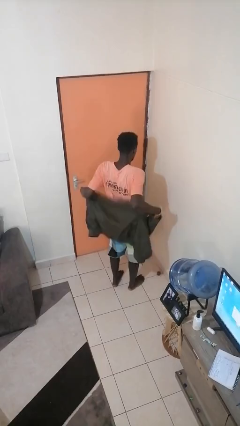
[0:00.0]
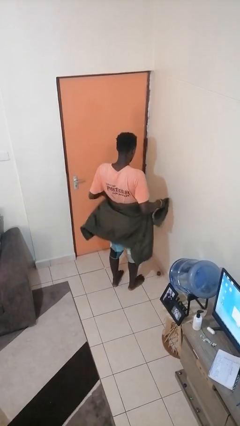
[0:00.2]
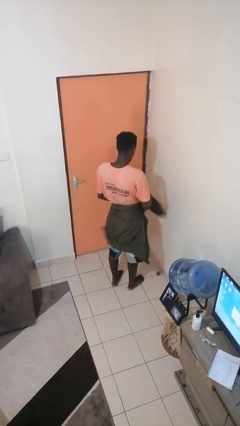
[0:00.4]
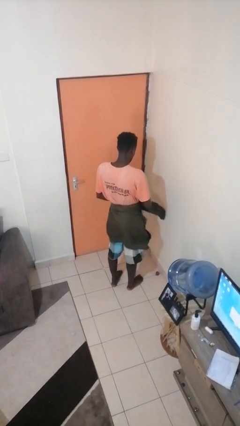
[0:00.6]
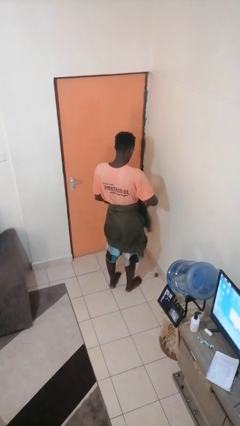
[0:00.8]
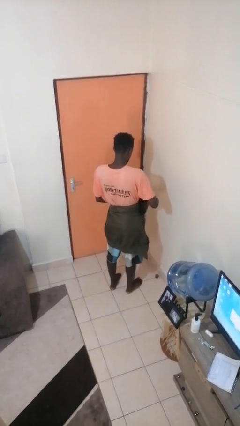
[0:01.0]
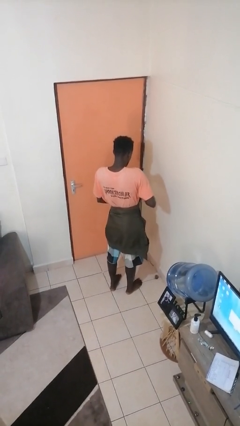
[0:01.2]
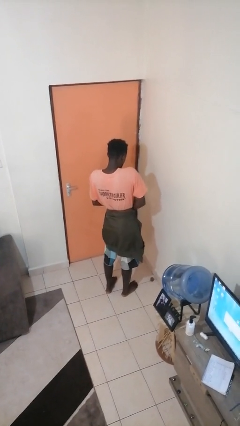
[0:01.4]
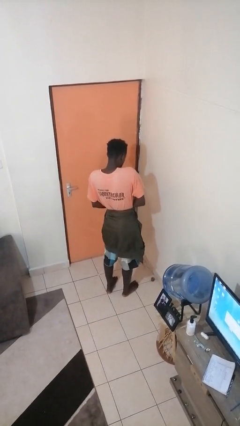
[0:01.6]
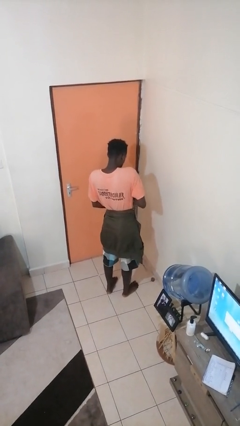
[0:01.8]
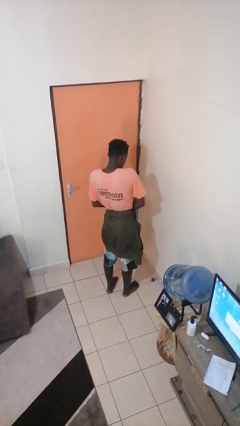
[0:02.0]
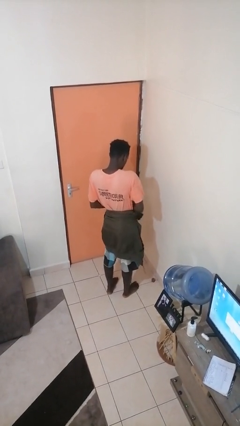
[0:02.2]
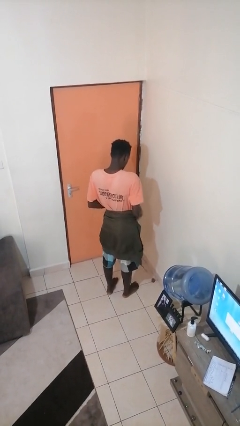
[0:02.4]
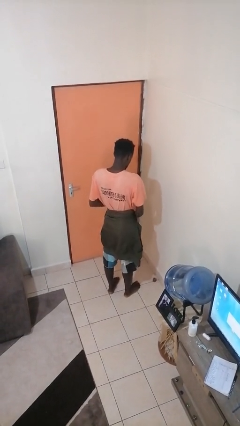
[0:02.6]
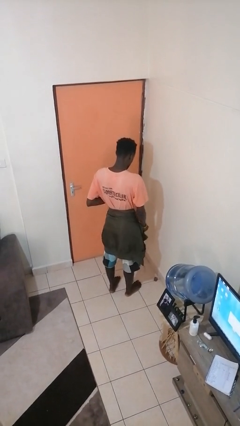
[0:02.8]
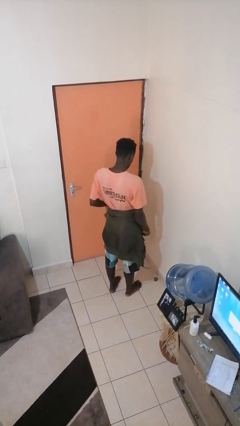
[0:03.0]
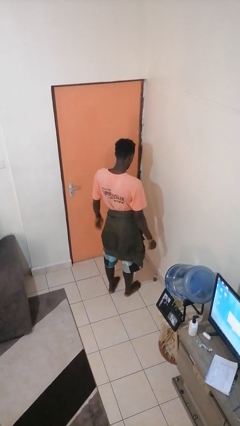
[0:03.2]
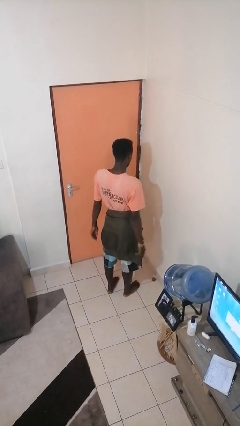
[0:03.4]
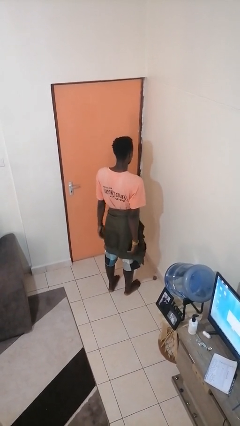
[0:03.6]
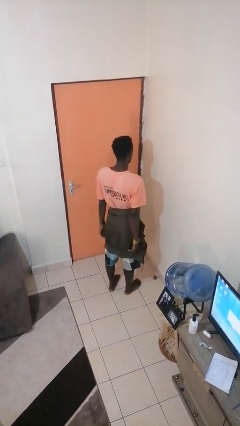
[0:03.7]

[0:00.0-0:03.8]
person ties jacket around waist

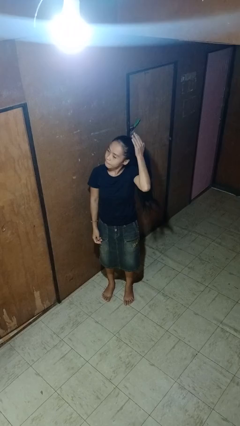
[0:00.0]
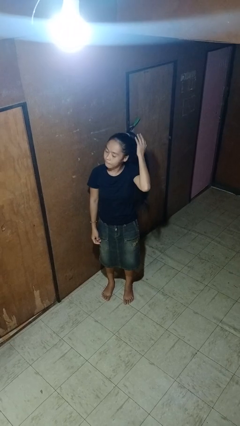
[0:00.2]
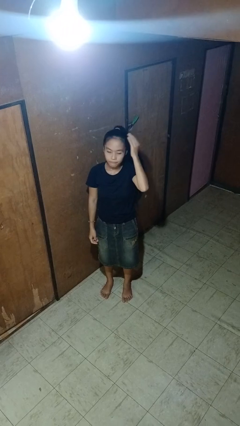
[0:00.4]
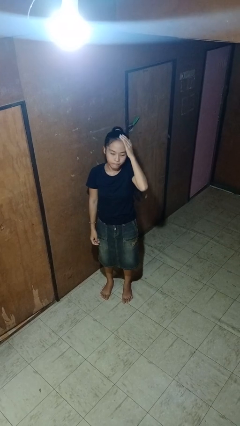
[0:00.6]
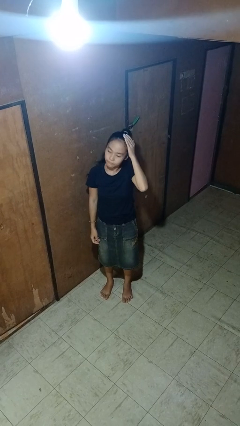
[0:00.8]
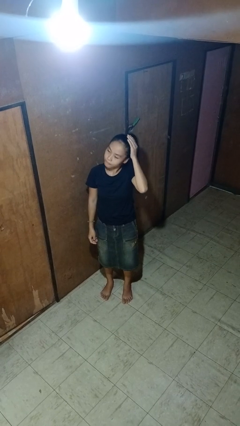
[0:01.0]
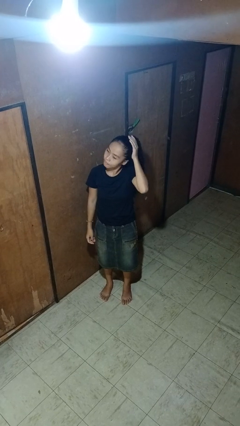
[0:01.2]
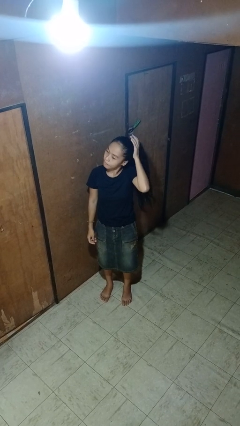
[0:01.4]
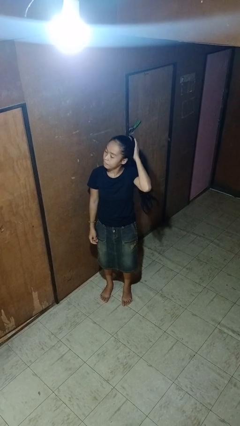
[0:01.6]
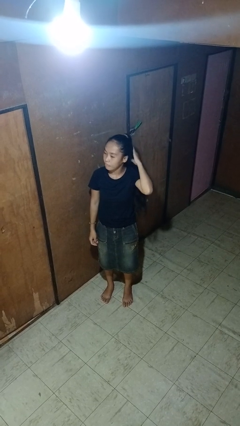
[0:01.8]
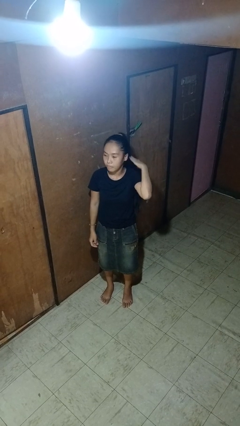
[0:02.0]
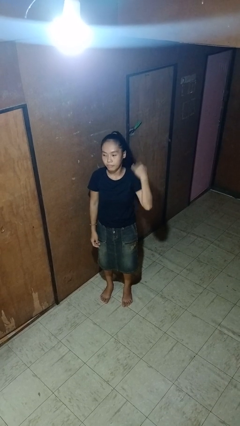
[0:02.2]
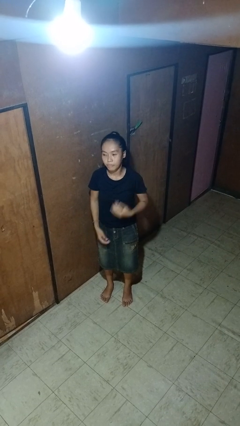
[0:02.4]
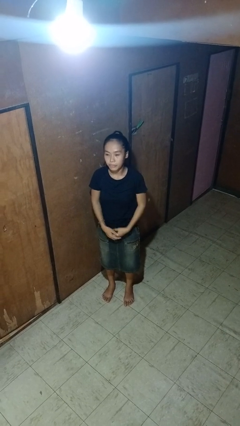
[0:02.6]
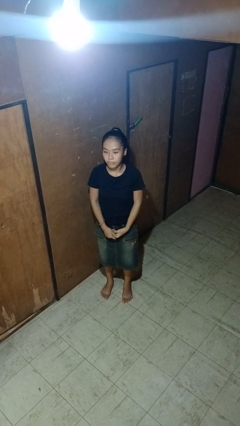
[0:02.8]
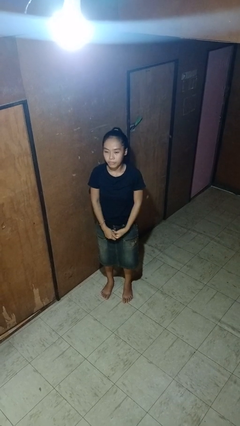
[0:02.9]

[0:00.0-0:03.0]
person strokes hair

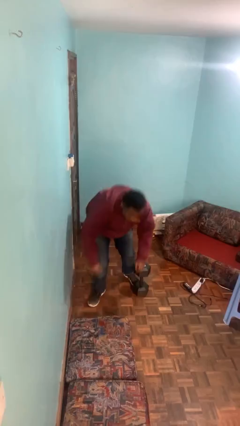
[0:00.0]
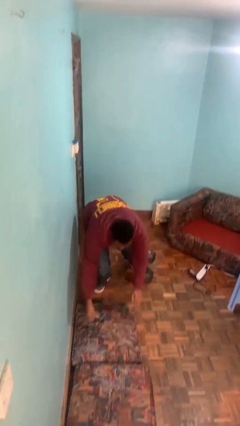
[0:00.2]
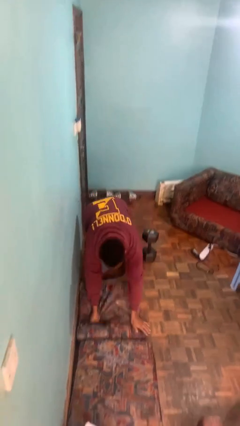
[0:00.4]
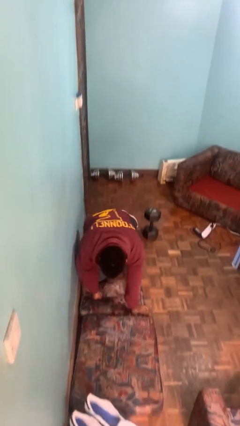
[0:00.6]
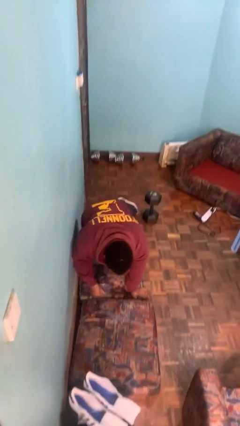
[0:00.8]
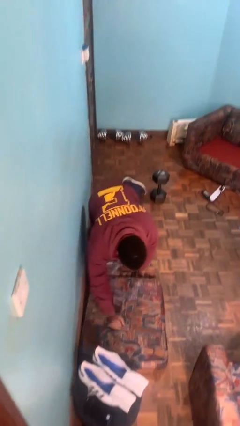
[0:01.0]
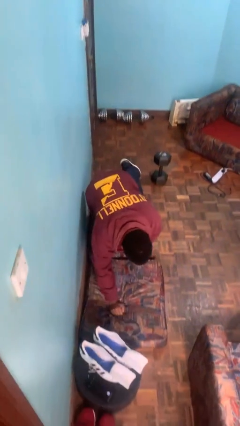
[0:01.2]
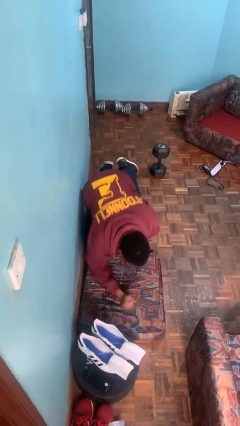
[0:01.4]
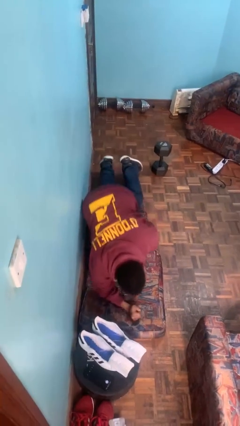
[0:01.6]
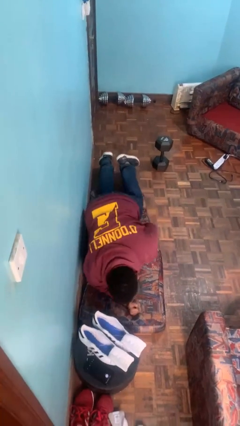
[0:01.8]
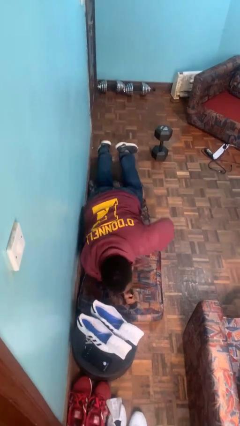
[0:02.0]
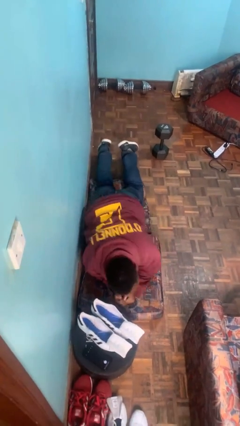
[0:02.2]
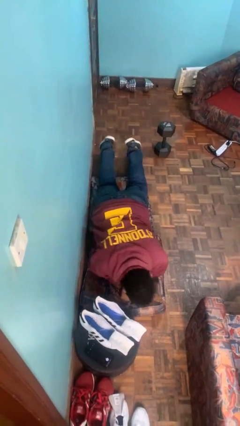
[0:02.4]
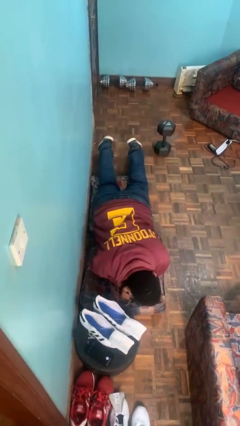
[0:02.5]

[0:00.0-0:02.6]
person lies down on floor

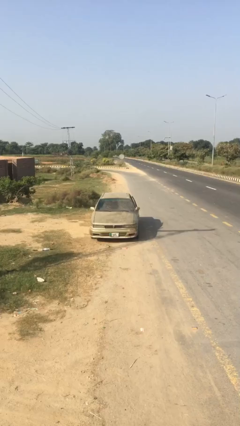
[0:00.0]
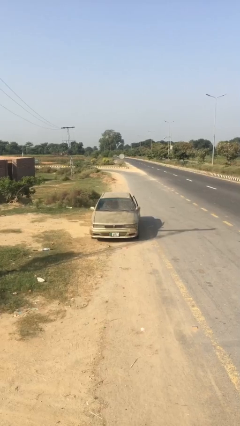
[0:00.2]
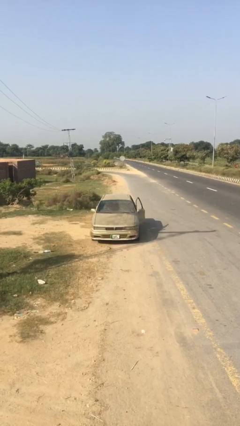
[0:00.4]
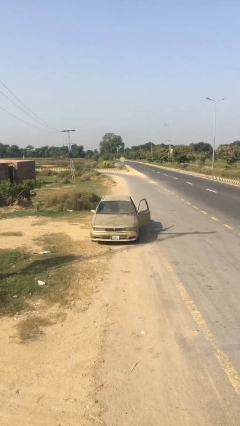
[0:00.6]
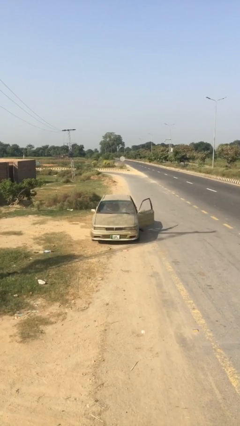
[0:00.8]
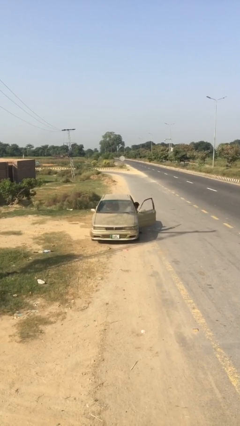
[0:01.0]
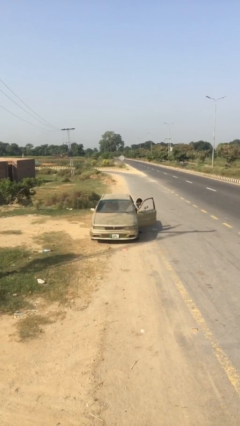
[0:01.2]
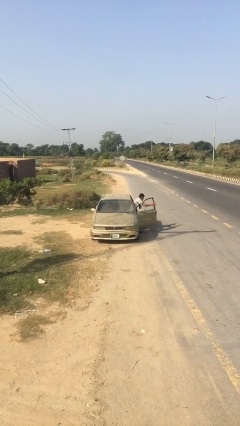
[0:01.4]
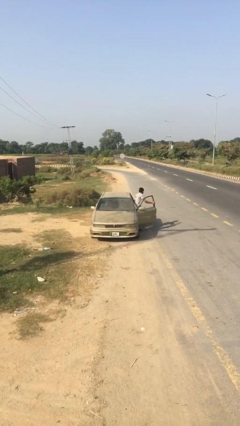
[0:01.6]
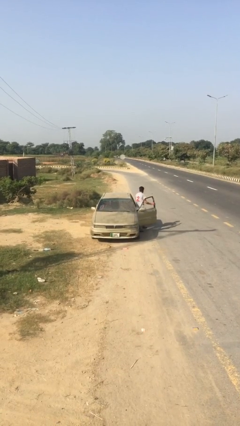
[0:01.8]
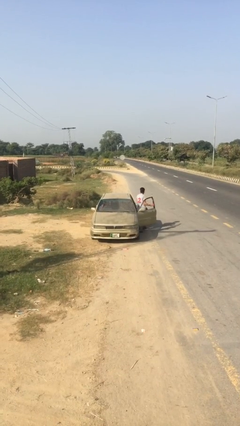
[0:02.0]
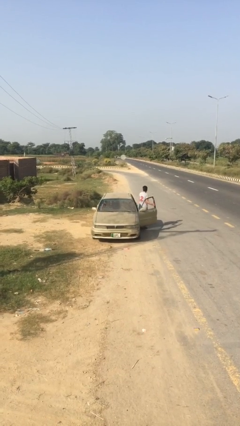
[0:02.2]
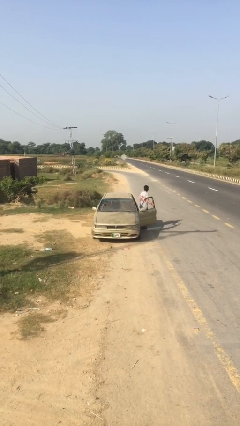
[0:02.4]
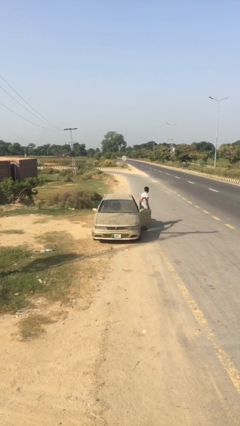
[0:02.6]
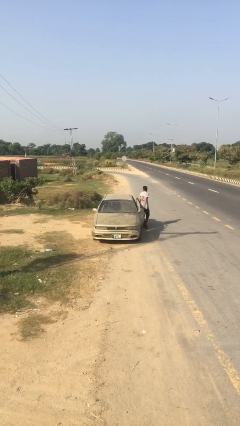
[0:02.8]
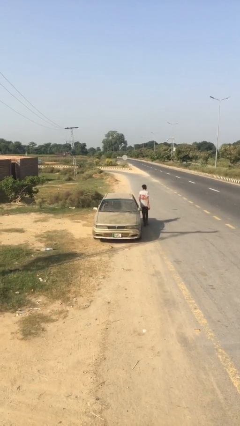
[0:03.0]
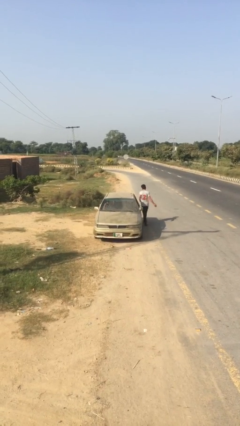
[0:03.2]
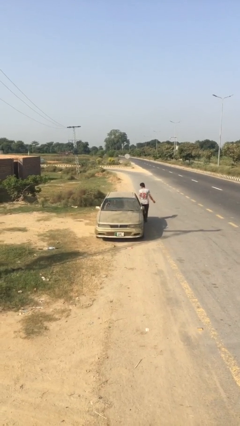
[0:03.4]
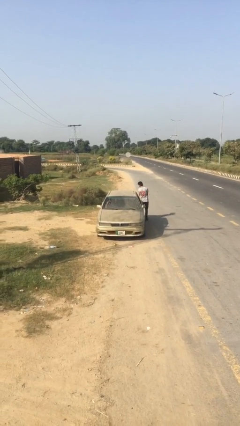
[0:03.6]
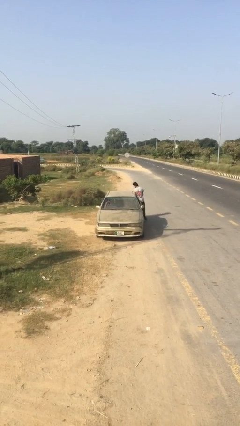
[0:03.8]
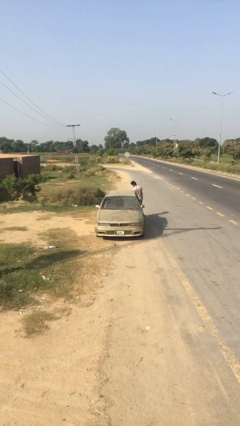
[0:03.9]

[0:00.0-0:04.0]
car drops off person

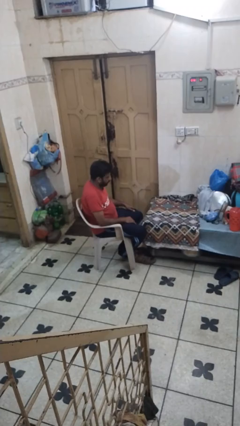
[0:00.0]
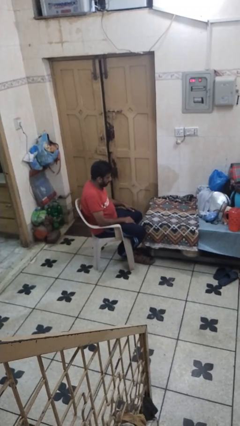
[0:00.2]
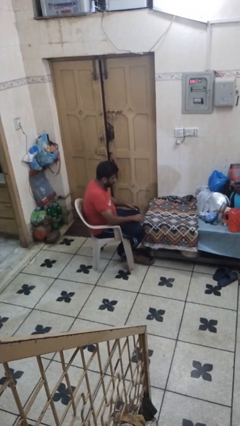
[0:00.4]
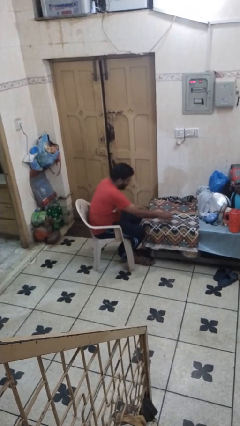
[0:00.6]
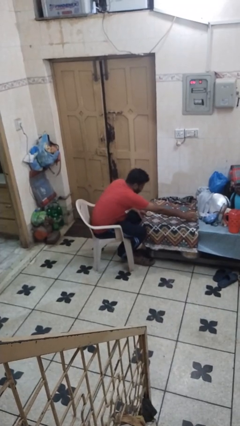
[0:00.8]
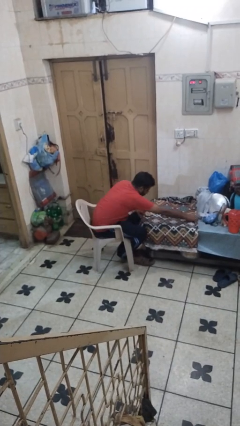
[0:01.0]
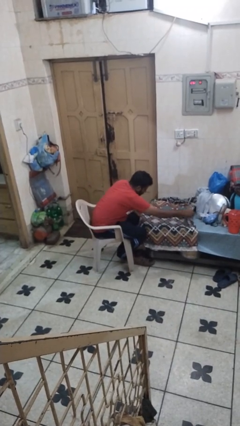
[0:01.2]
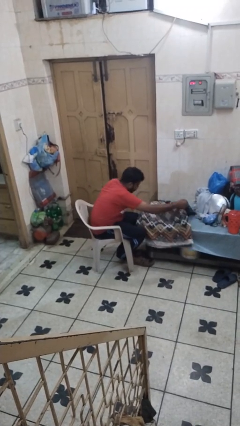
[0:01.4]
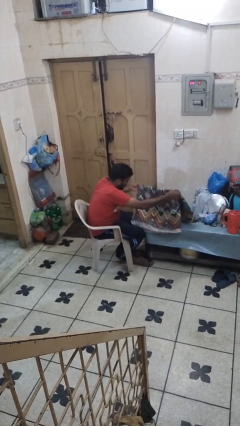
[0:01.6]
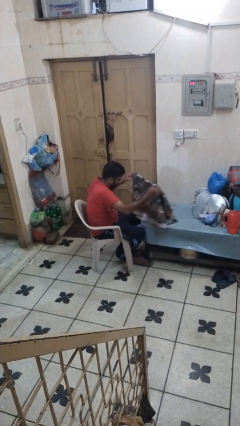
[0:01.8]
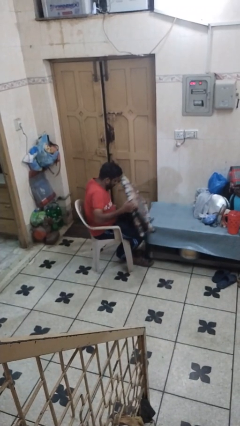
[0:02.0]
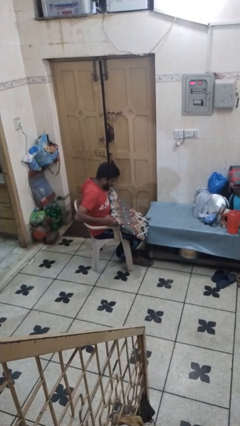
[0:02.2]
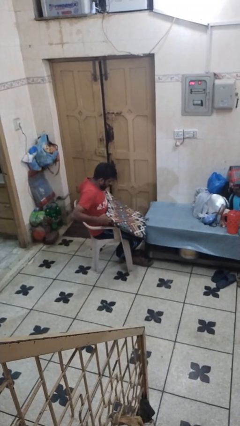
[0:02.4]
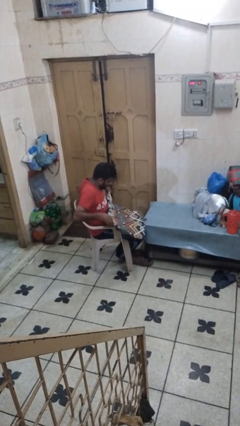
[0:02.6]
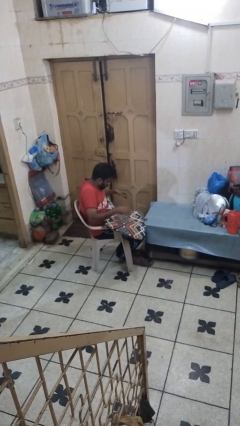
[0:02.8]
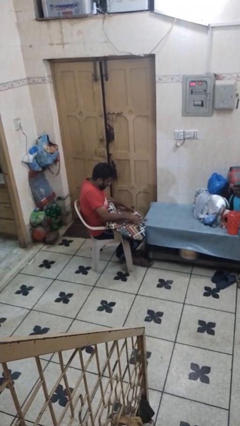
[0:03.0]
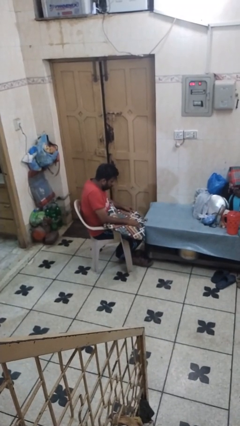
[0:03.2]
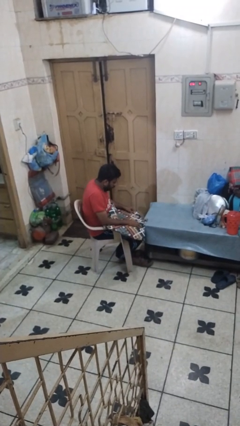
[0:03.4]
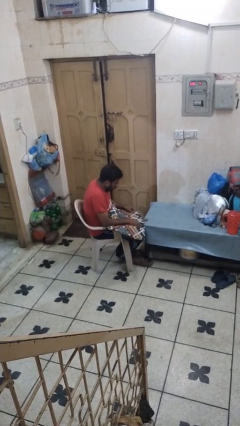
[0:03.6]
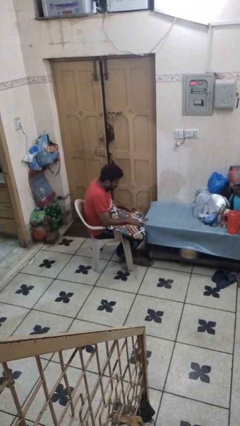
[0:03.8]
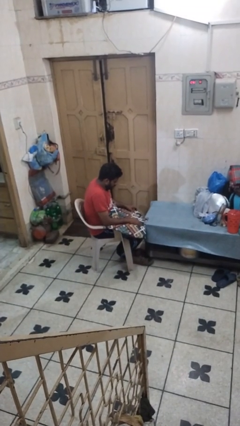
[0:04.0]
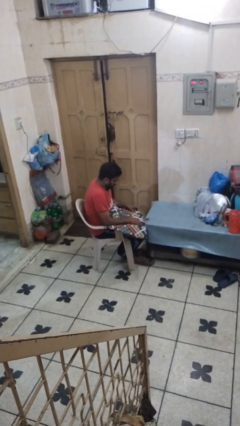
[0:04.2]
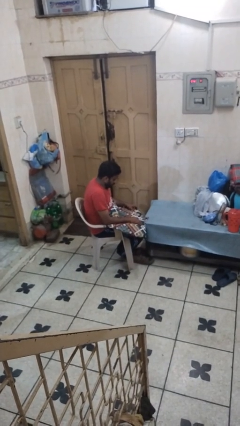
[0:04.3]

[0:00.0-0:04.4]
person folds tablecloth
